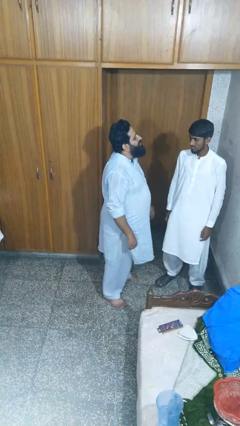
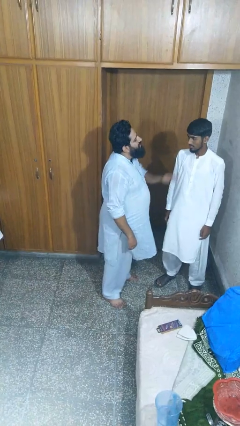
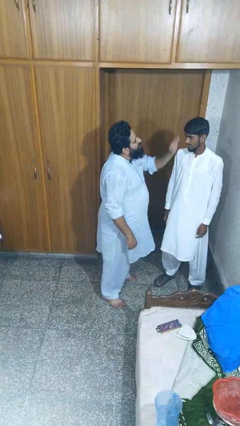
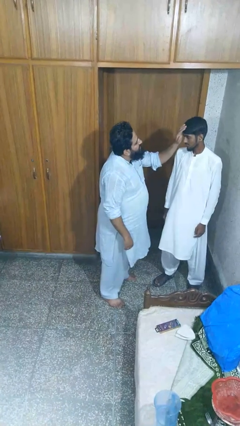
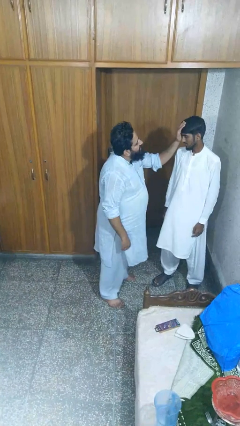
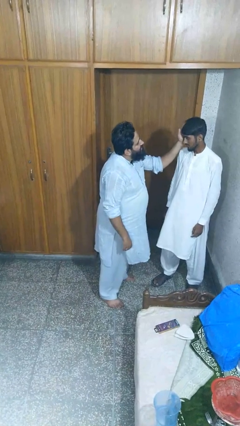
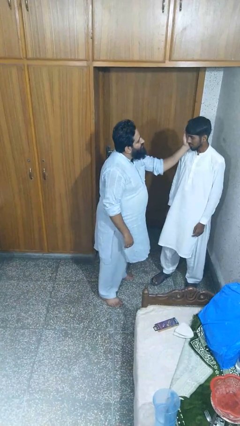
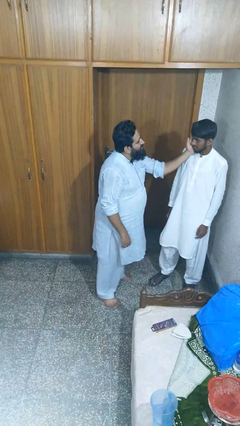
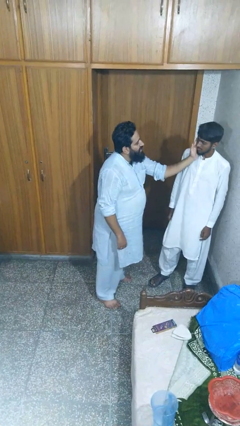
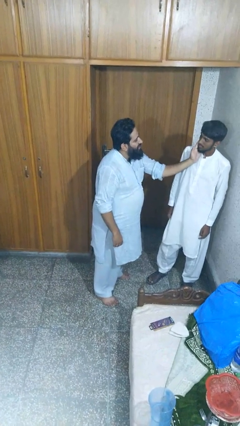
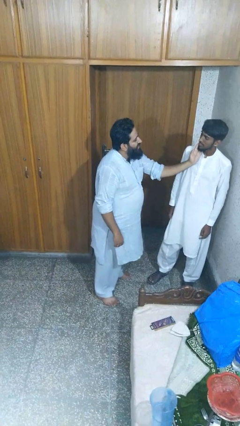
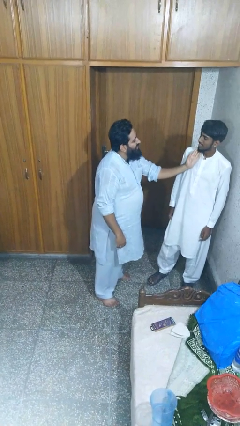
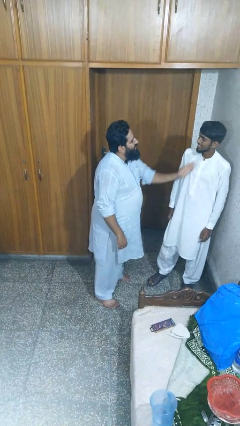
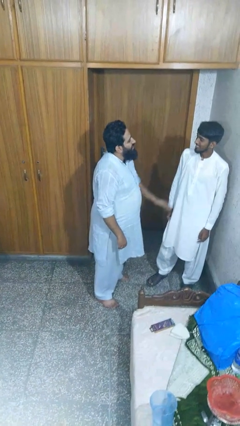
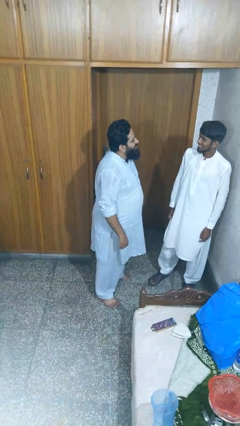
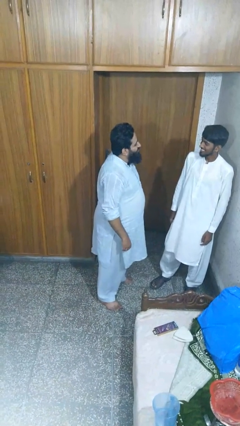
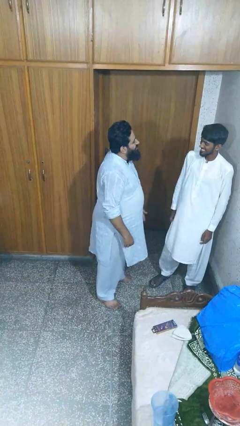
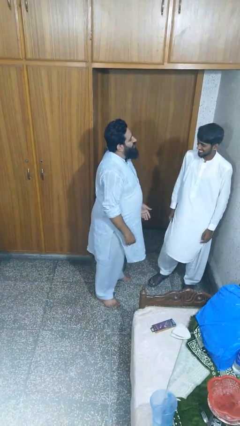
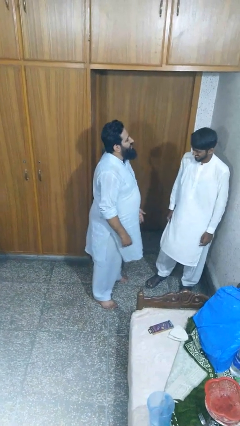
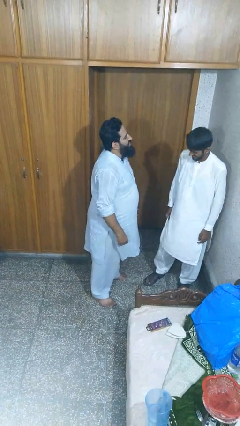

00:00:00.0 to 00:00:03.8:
person touches face of person

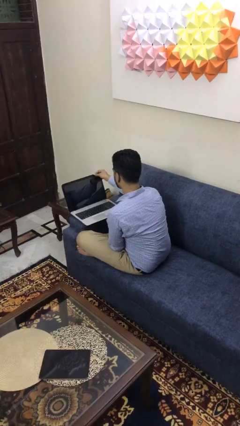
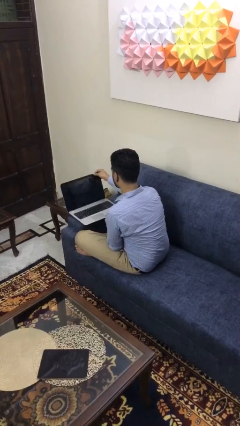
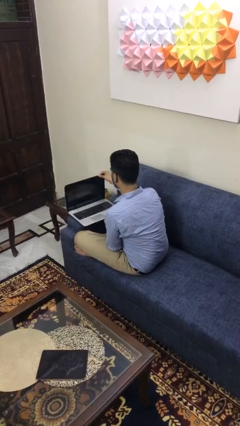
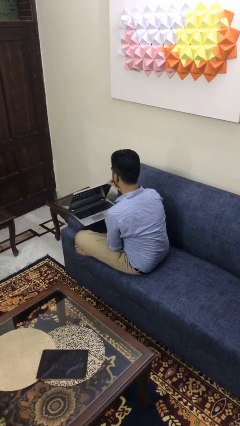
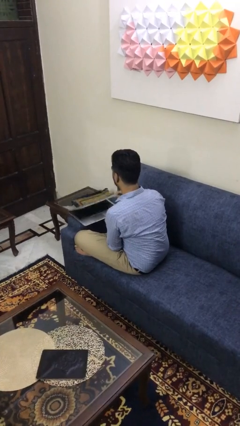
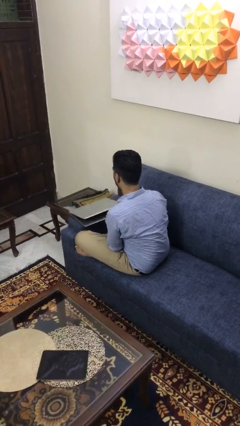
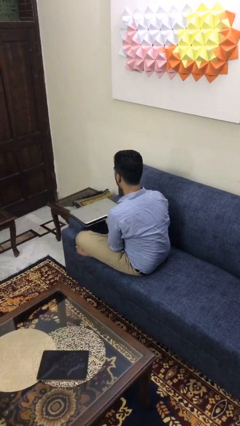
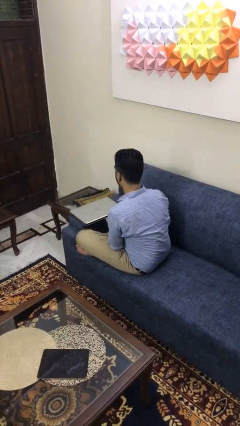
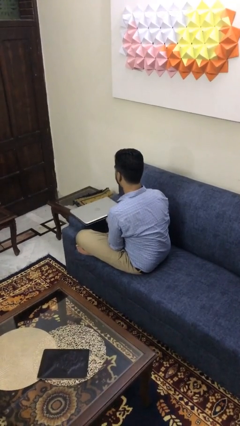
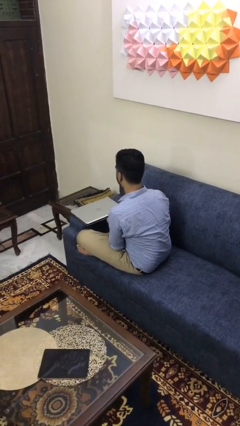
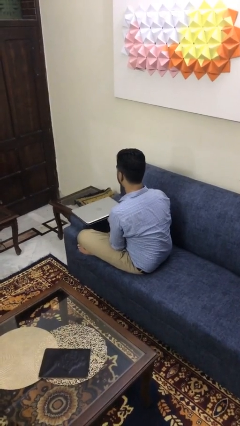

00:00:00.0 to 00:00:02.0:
person closes laptop

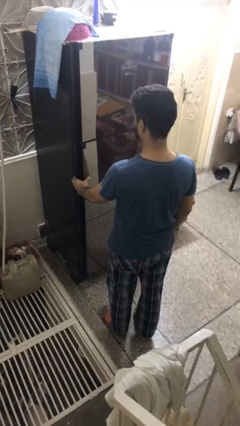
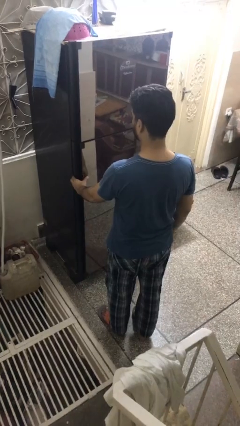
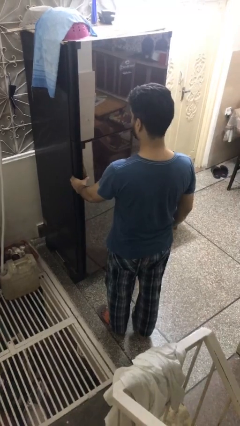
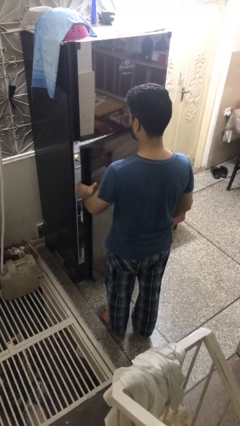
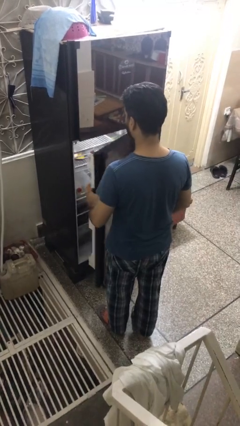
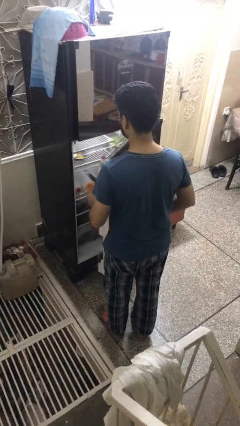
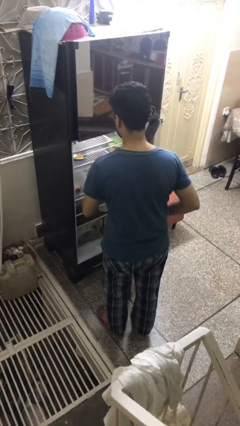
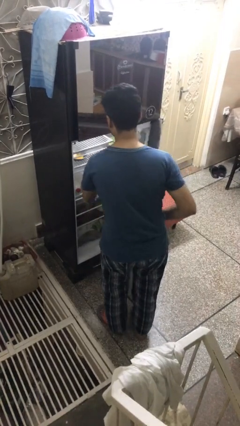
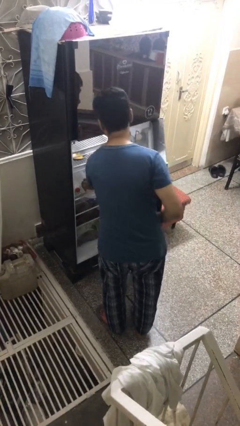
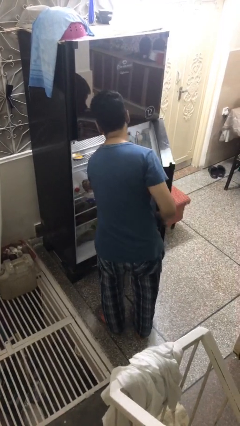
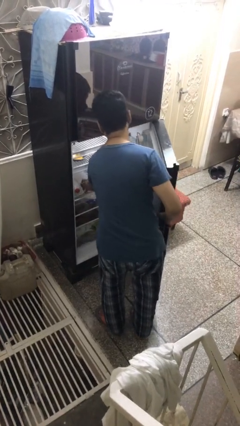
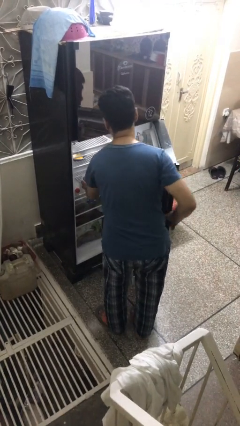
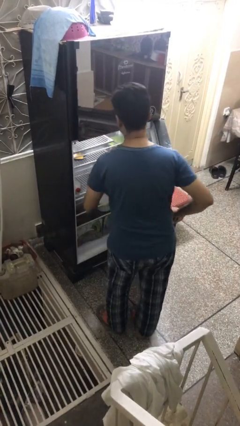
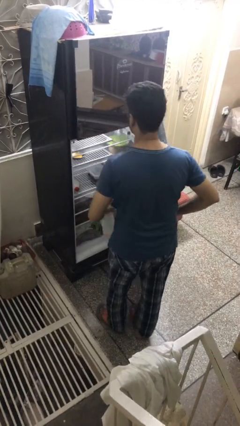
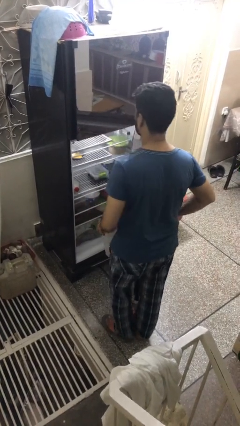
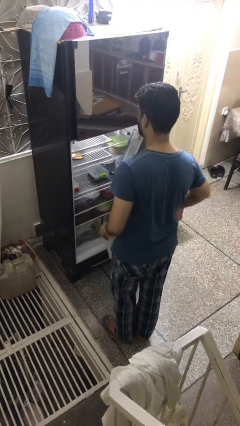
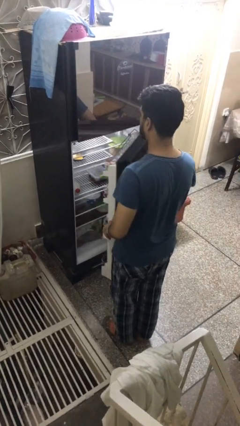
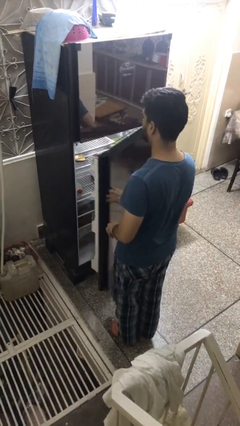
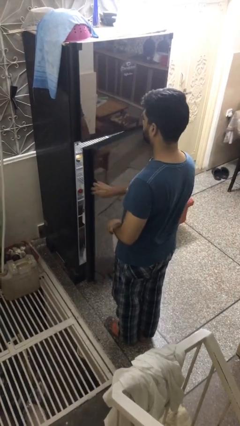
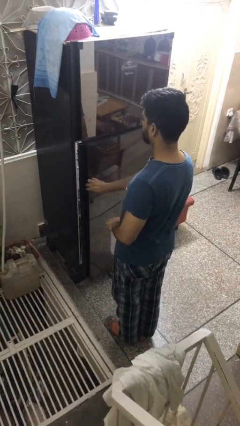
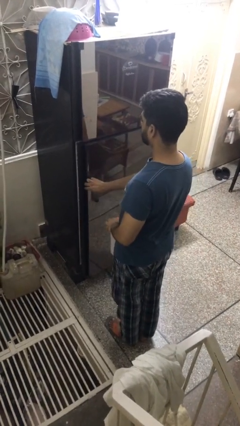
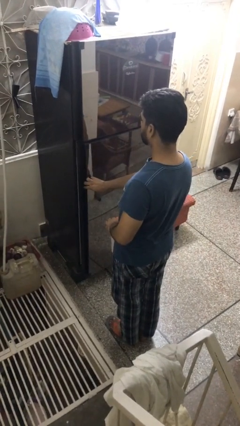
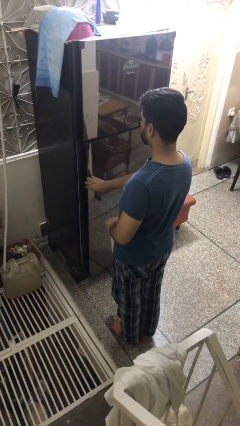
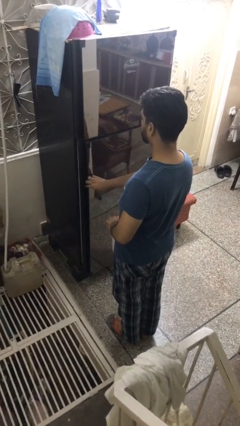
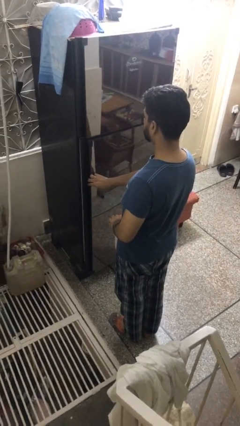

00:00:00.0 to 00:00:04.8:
person takes object from refrigerator

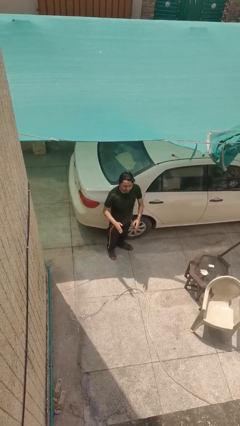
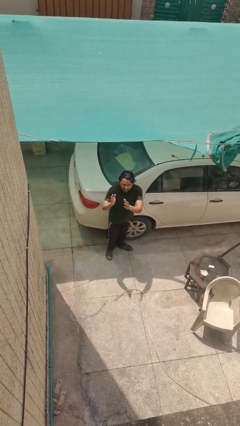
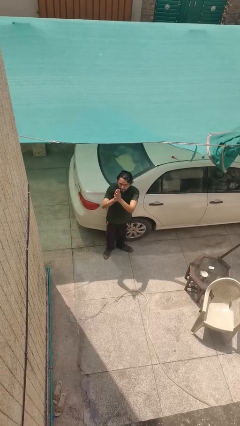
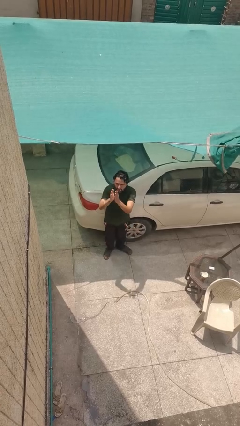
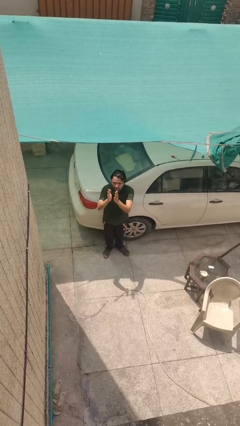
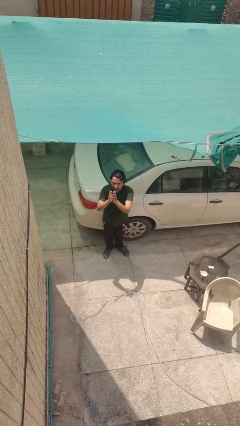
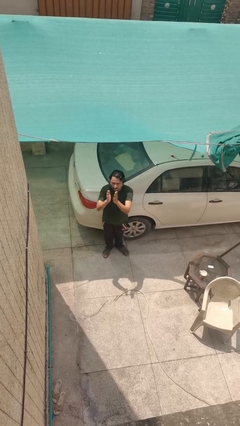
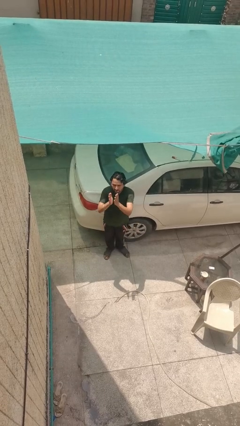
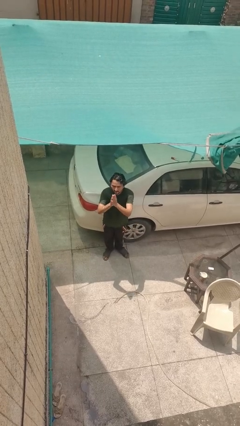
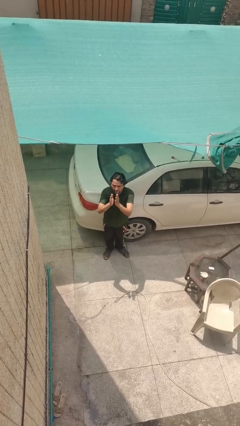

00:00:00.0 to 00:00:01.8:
person claps hands

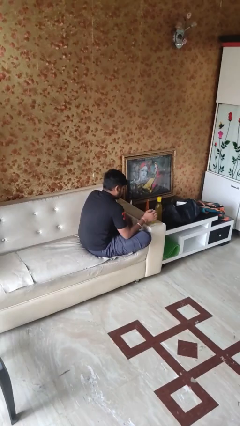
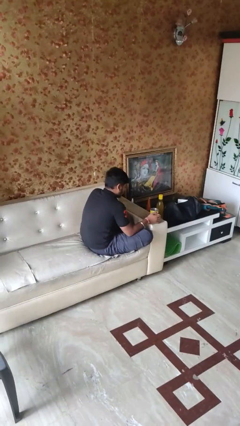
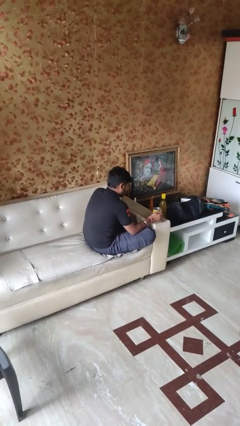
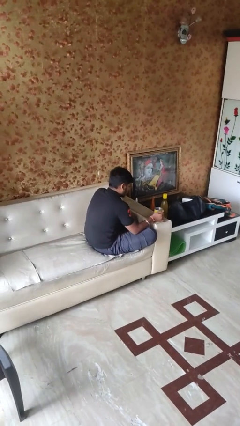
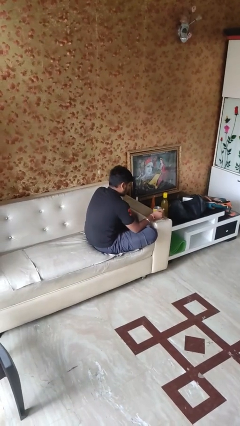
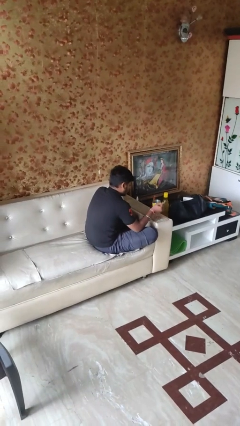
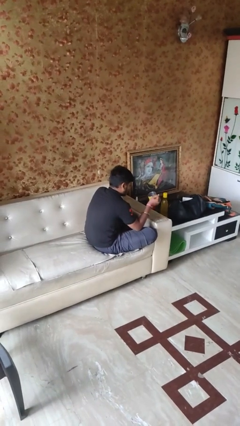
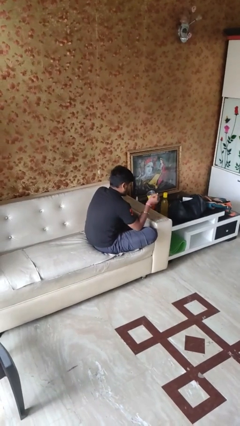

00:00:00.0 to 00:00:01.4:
person picks up object from table

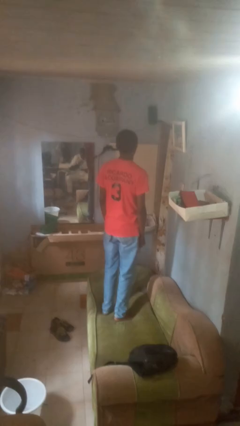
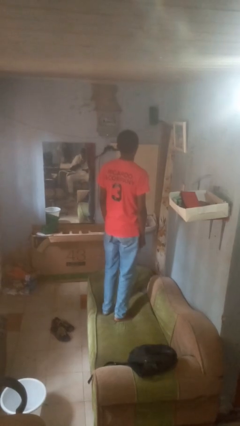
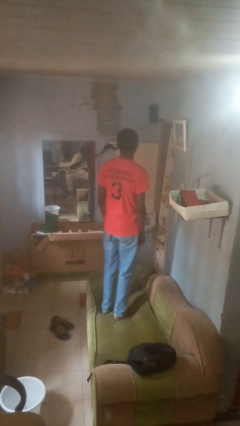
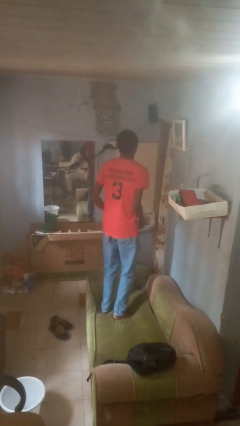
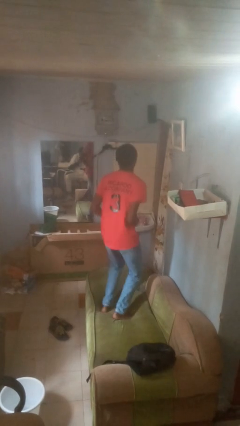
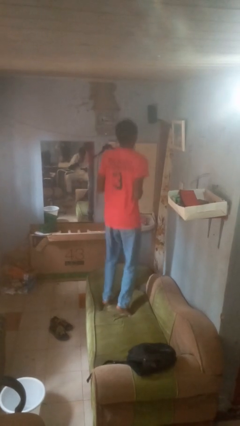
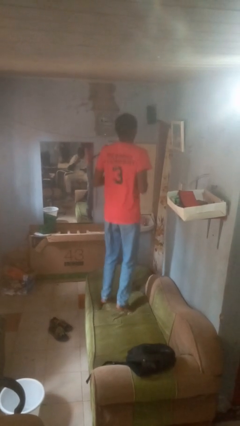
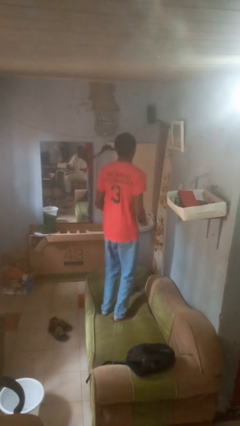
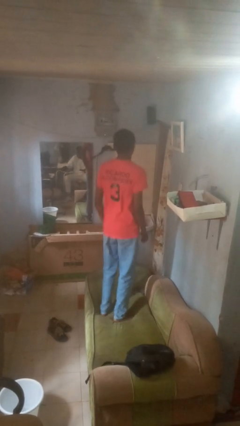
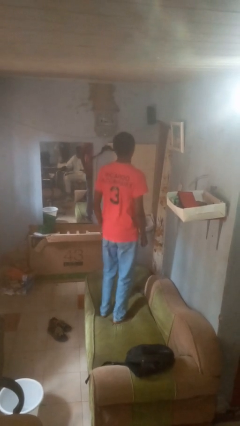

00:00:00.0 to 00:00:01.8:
person jumps on couch

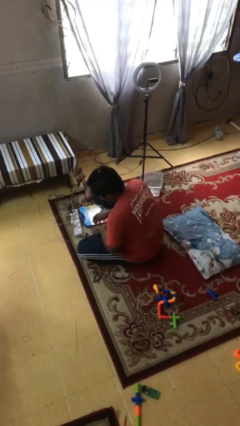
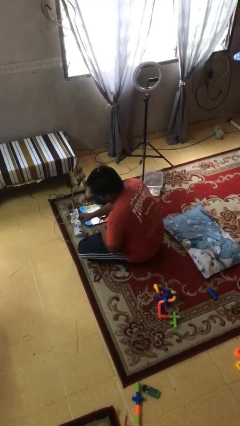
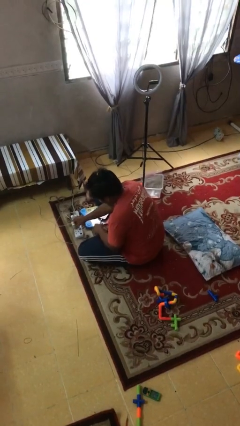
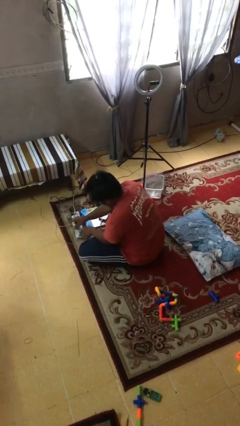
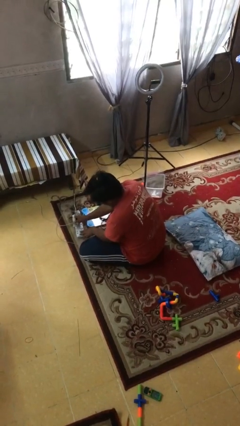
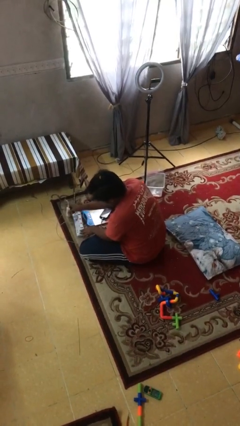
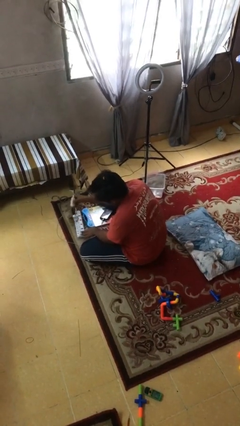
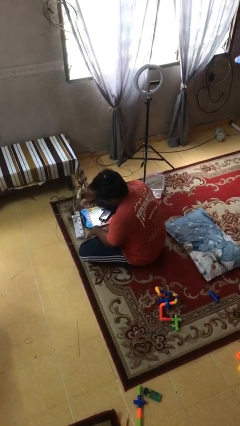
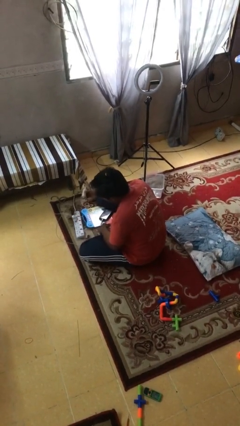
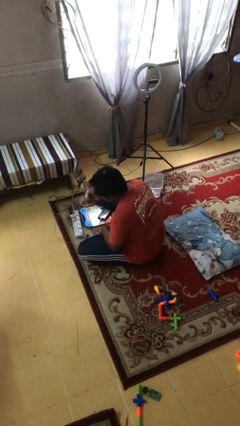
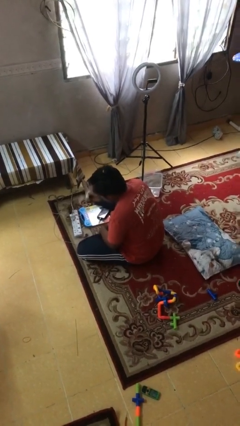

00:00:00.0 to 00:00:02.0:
person unplugs from electrical socket
